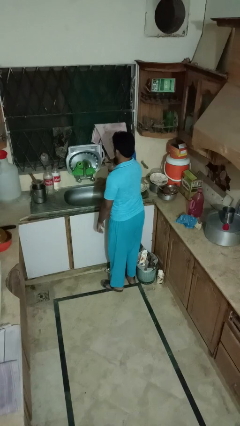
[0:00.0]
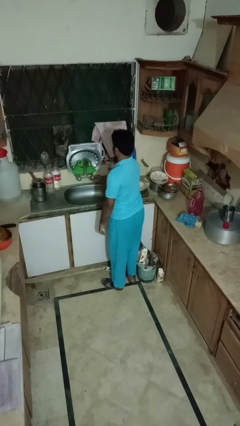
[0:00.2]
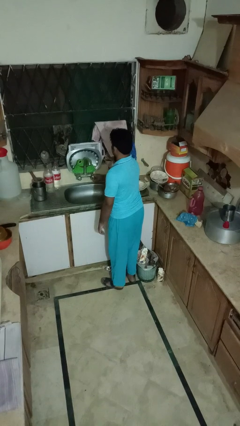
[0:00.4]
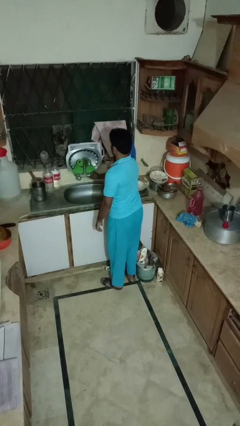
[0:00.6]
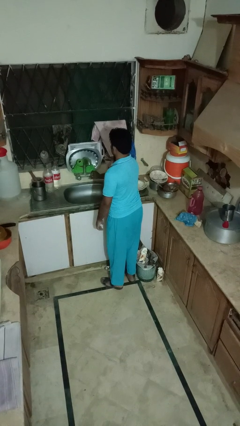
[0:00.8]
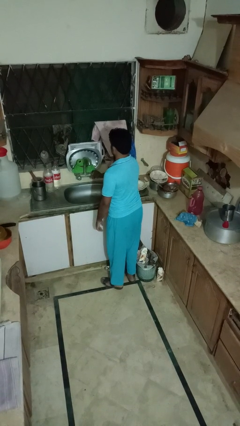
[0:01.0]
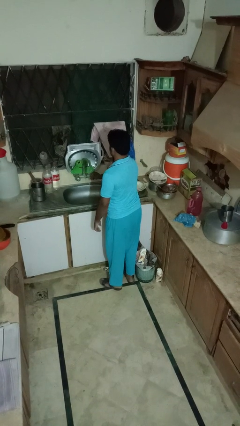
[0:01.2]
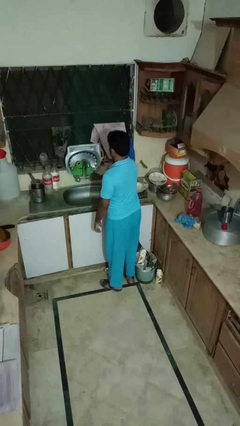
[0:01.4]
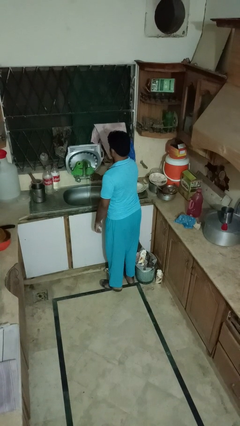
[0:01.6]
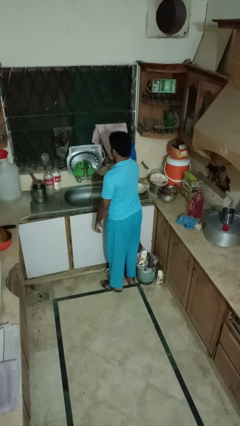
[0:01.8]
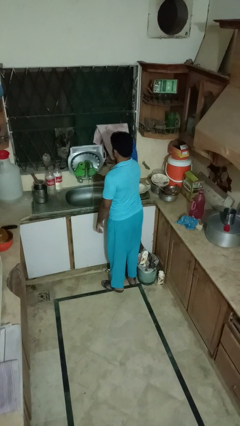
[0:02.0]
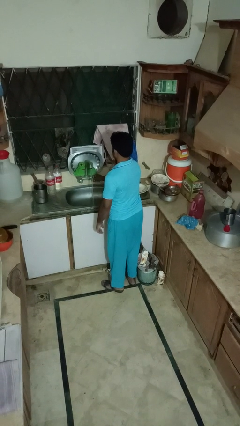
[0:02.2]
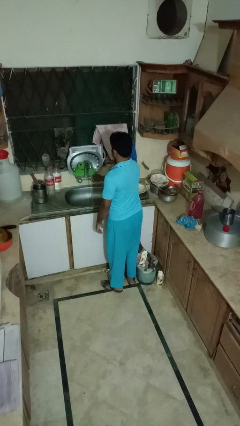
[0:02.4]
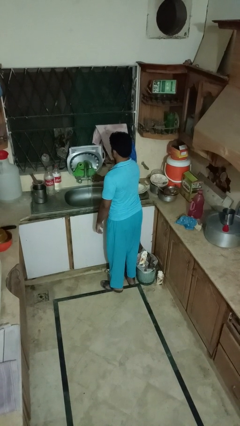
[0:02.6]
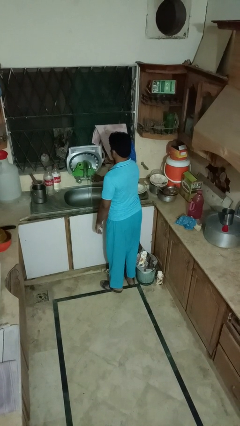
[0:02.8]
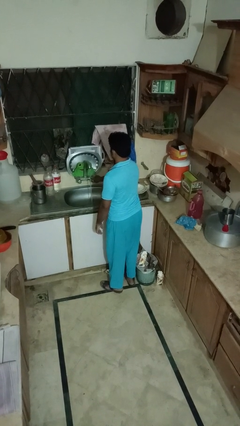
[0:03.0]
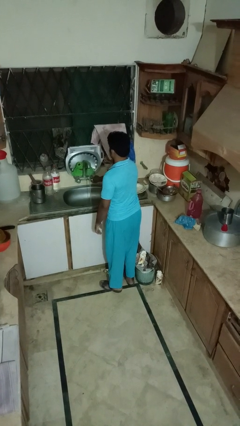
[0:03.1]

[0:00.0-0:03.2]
person turns on faucet

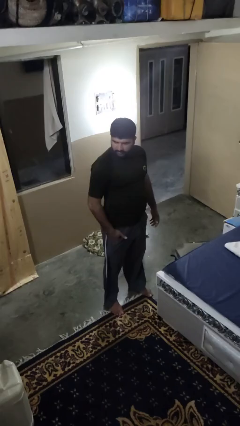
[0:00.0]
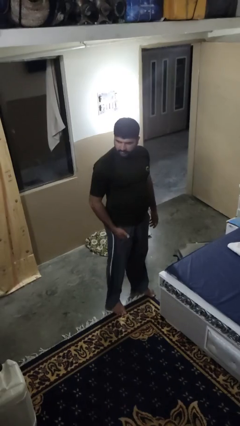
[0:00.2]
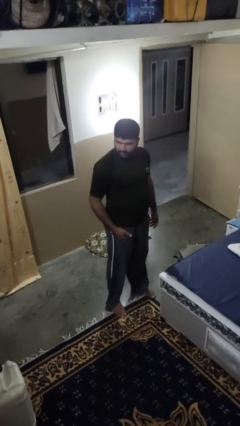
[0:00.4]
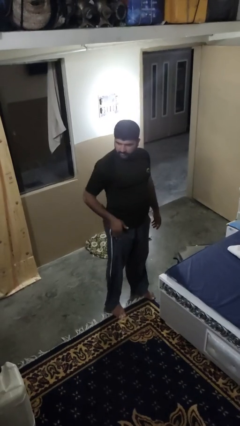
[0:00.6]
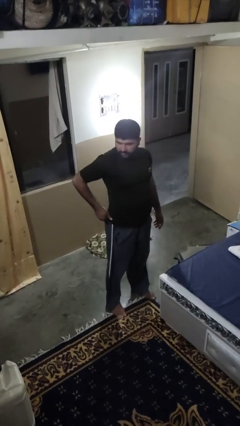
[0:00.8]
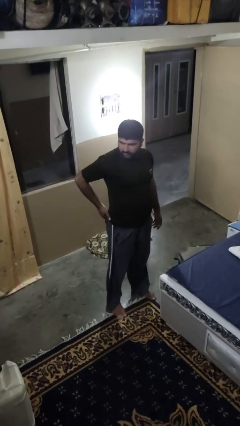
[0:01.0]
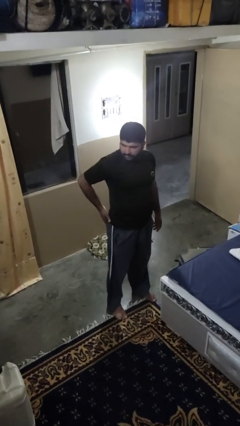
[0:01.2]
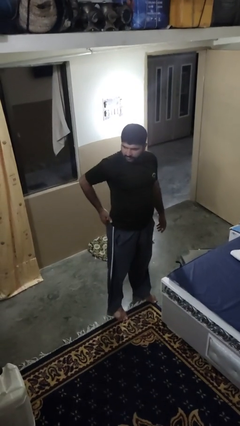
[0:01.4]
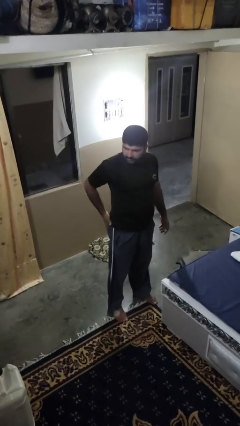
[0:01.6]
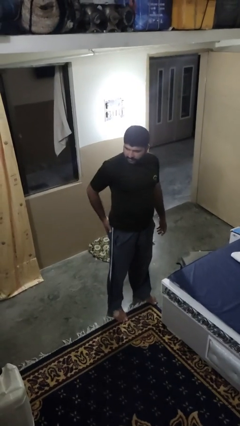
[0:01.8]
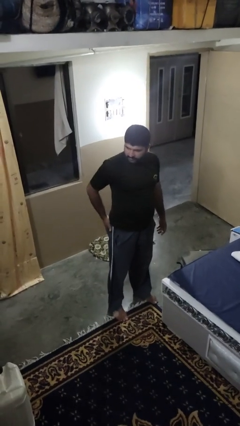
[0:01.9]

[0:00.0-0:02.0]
person puts hands in back pockets

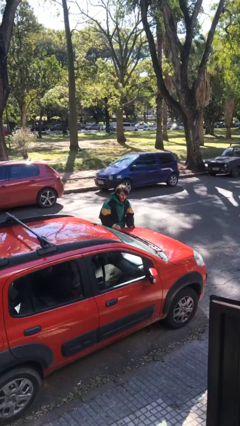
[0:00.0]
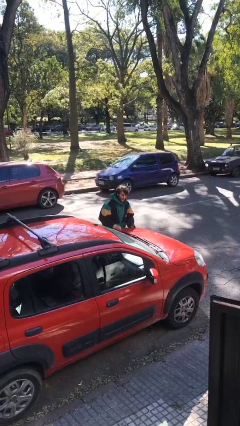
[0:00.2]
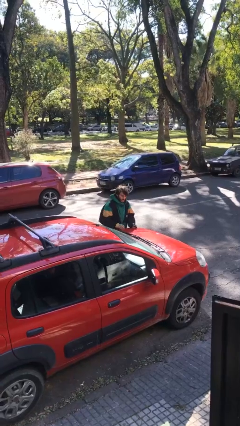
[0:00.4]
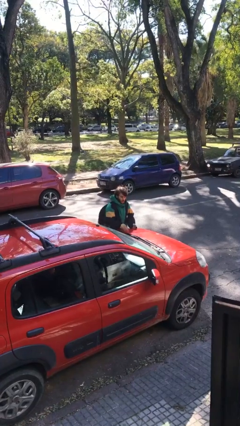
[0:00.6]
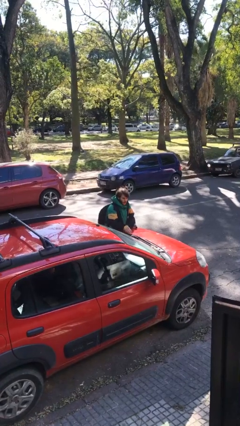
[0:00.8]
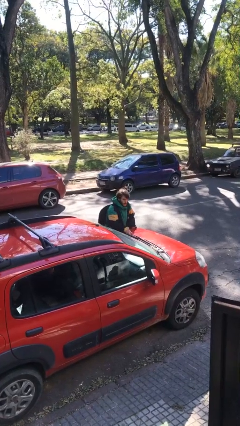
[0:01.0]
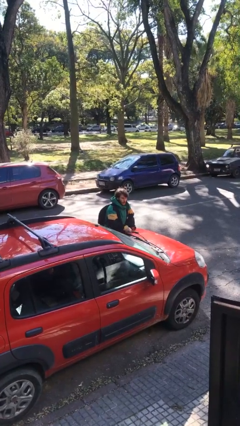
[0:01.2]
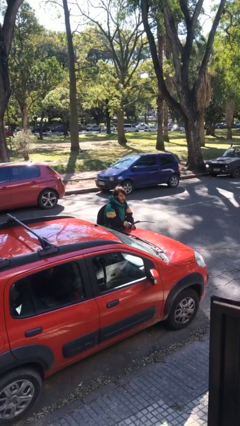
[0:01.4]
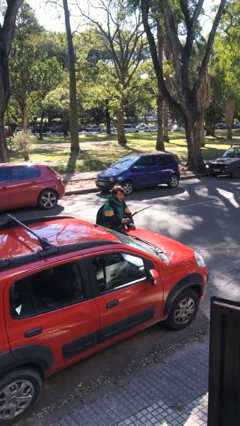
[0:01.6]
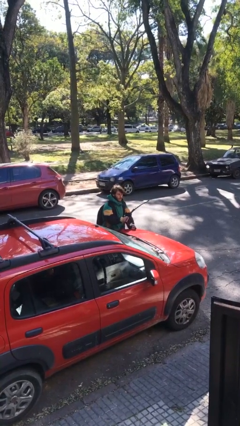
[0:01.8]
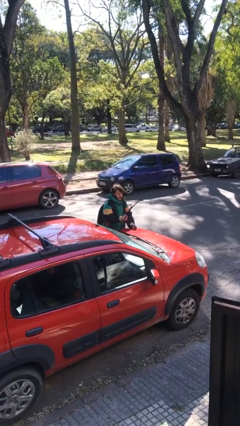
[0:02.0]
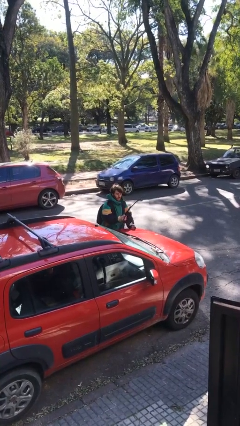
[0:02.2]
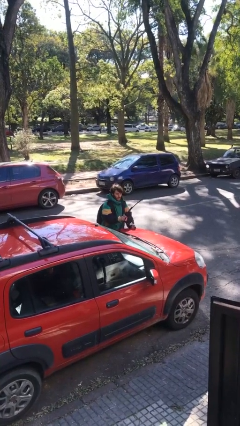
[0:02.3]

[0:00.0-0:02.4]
person flips up car wipers

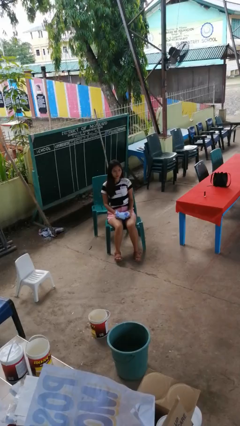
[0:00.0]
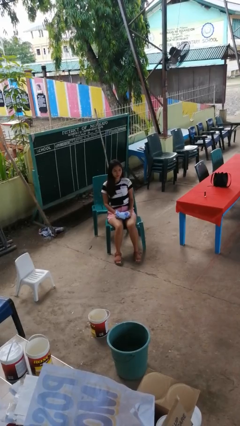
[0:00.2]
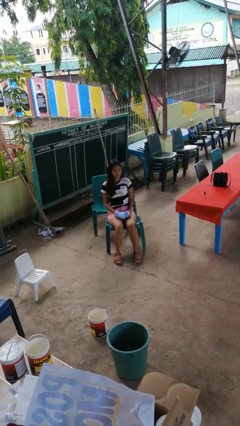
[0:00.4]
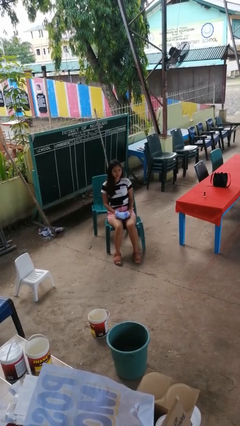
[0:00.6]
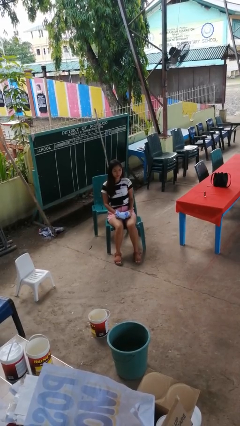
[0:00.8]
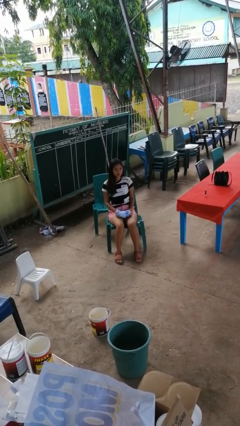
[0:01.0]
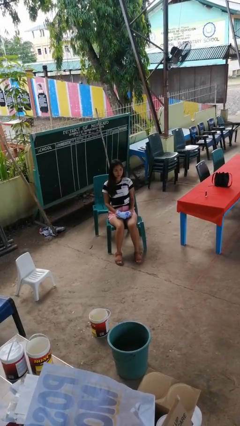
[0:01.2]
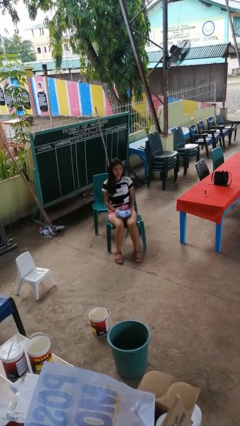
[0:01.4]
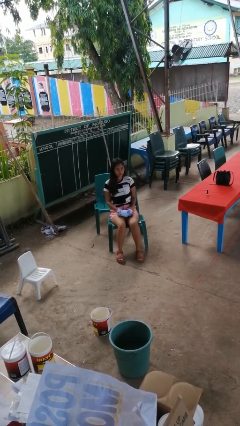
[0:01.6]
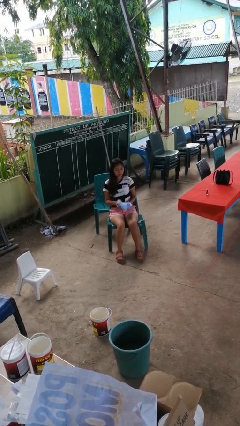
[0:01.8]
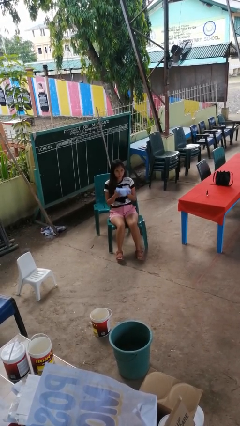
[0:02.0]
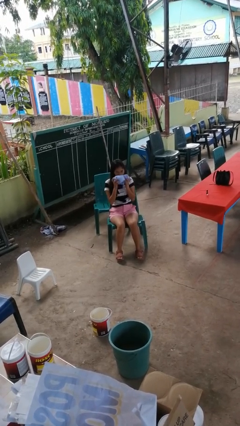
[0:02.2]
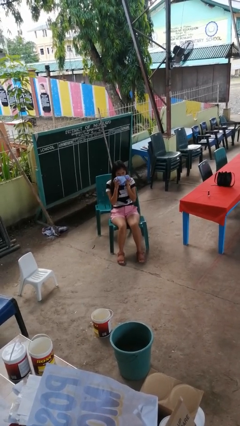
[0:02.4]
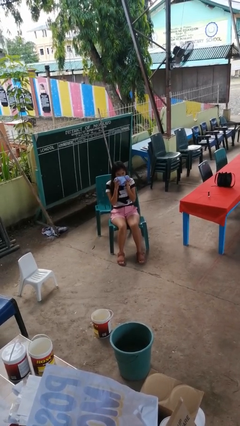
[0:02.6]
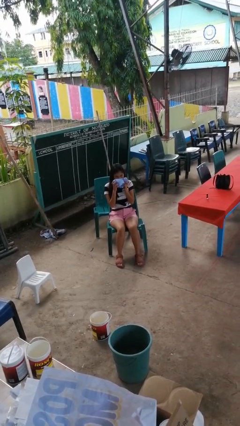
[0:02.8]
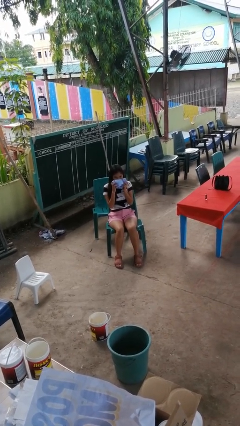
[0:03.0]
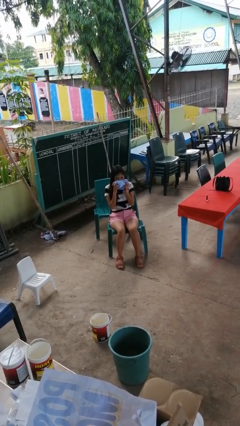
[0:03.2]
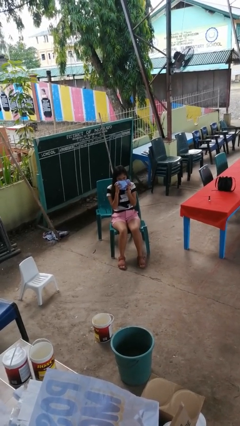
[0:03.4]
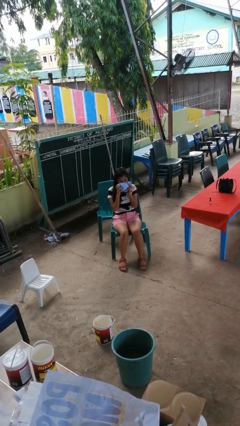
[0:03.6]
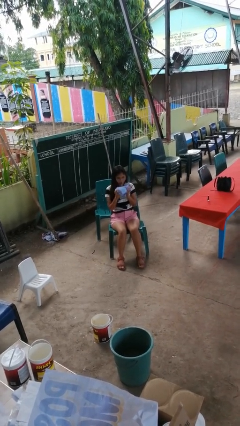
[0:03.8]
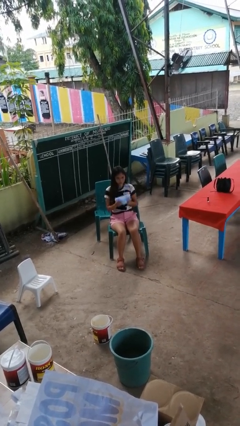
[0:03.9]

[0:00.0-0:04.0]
person blows nose

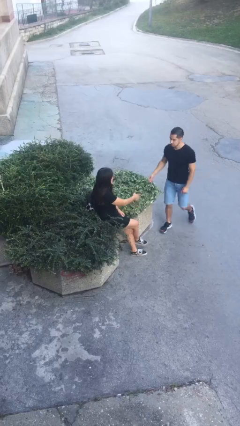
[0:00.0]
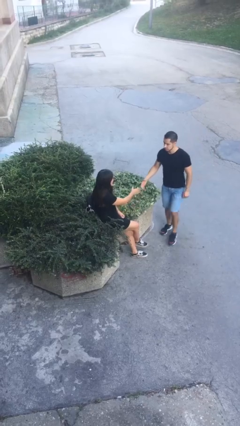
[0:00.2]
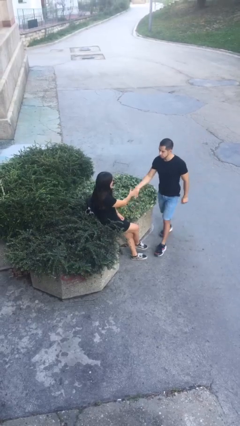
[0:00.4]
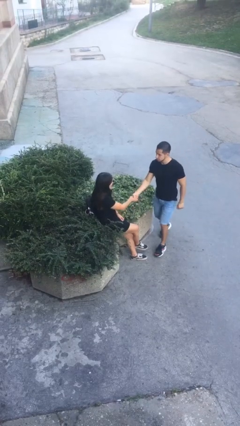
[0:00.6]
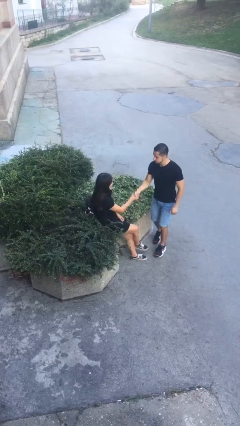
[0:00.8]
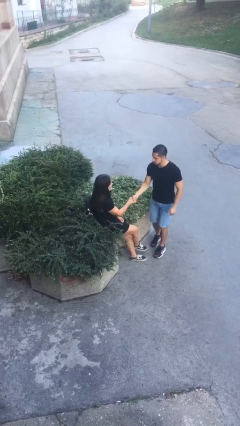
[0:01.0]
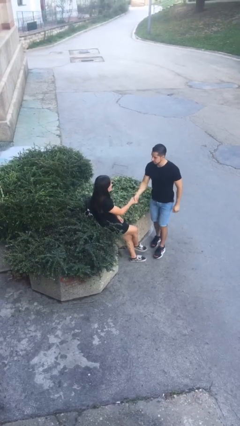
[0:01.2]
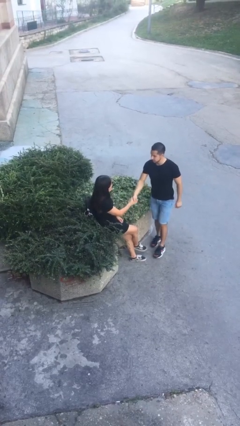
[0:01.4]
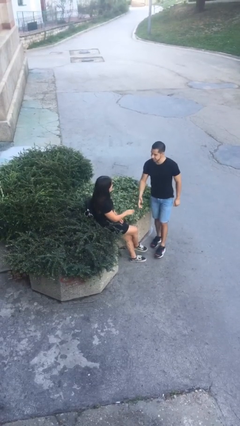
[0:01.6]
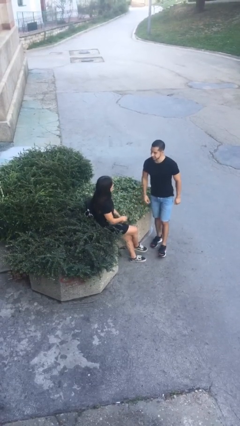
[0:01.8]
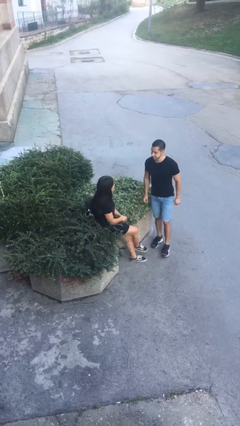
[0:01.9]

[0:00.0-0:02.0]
person shakes hand

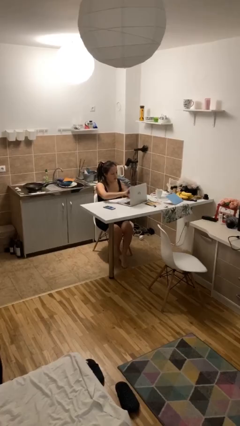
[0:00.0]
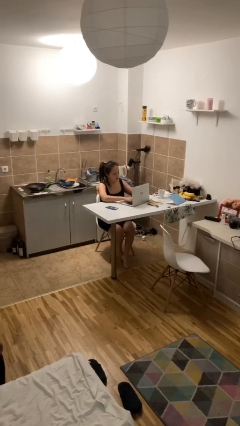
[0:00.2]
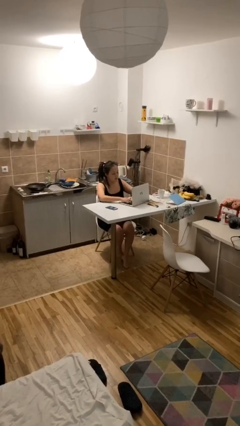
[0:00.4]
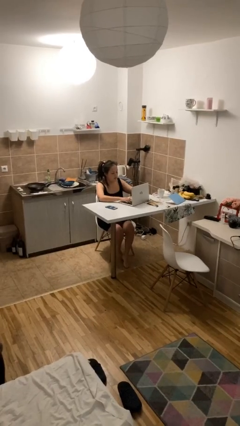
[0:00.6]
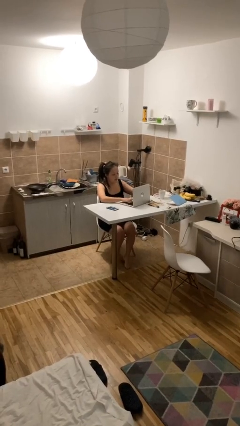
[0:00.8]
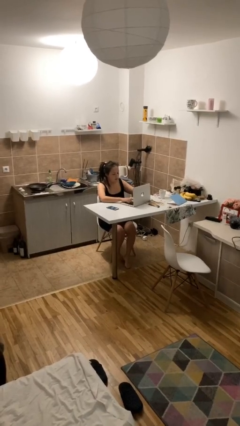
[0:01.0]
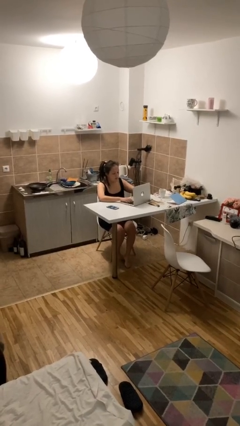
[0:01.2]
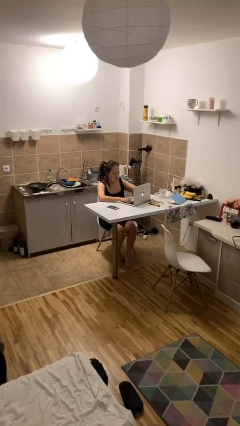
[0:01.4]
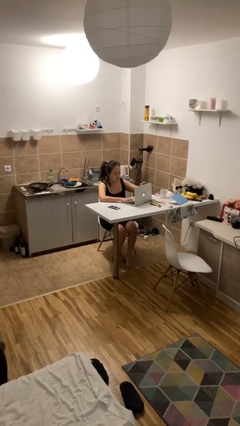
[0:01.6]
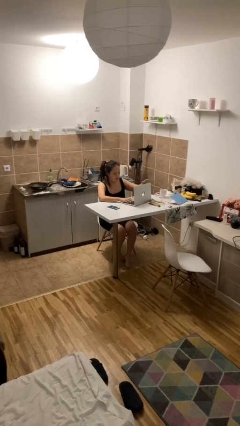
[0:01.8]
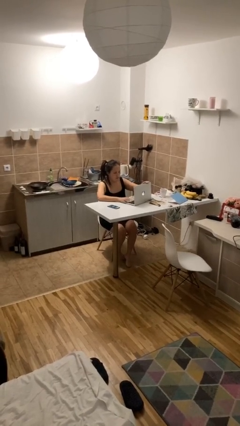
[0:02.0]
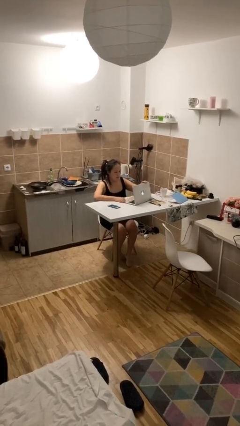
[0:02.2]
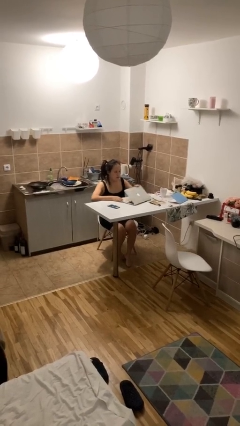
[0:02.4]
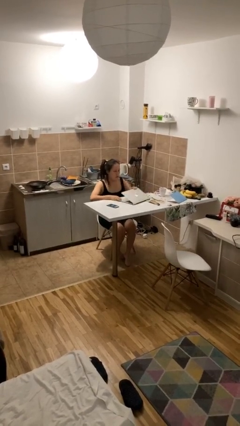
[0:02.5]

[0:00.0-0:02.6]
person interacts with laptop

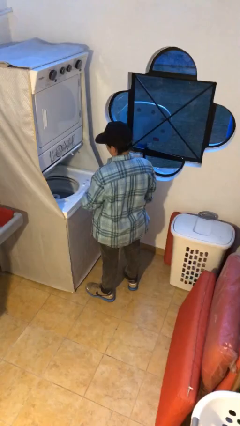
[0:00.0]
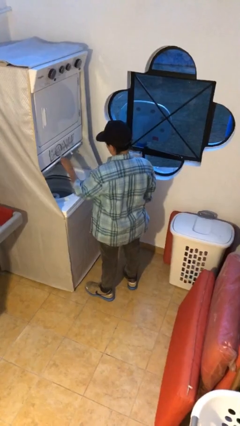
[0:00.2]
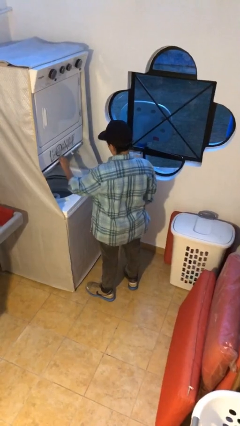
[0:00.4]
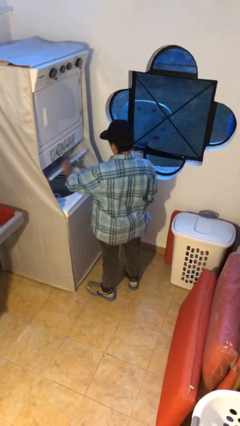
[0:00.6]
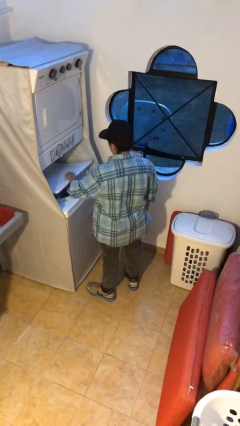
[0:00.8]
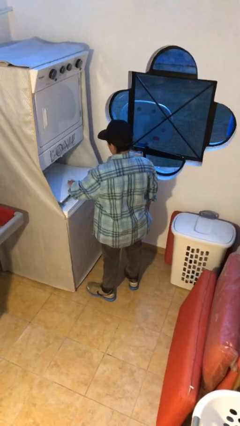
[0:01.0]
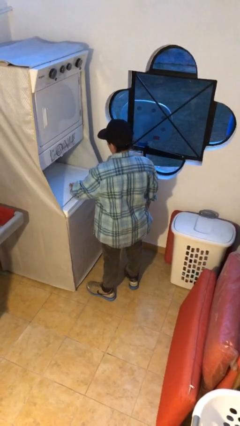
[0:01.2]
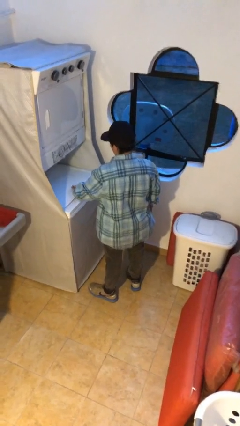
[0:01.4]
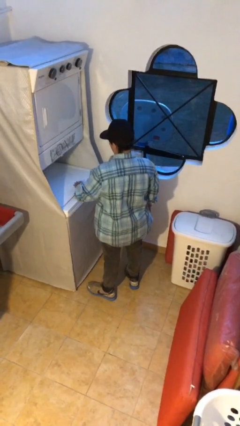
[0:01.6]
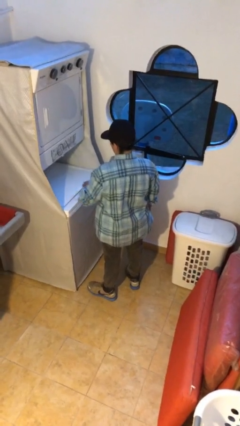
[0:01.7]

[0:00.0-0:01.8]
person closes clothes washer
